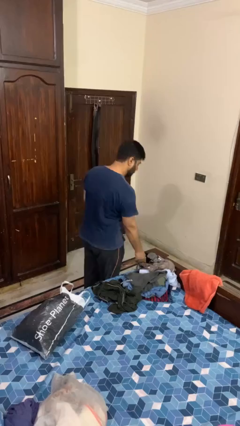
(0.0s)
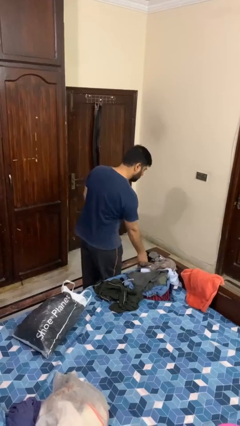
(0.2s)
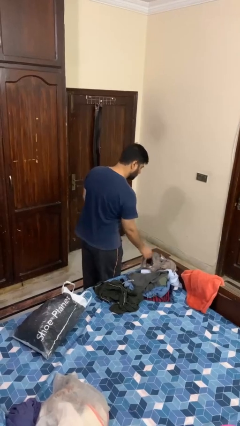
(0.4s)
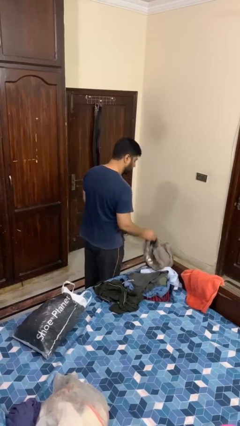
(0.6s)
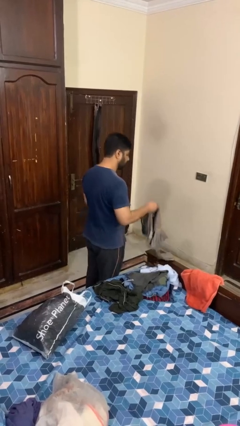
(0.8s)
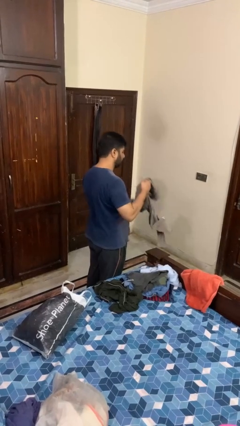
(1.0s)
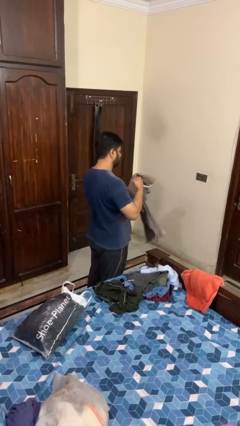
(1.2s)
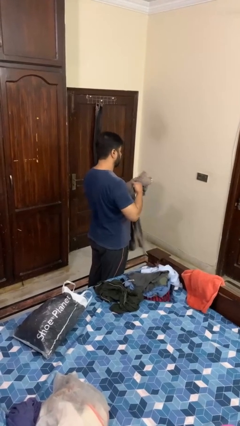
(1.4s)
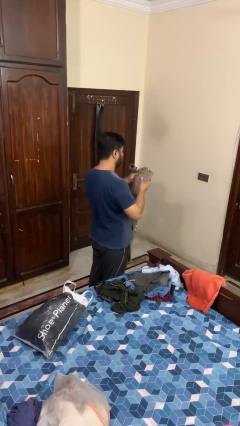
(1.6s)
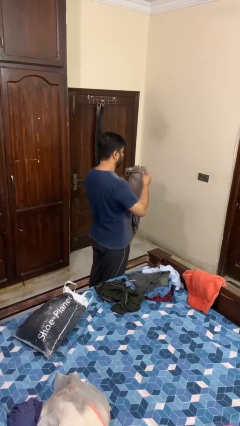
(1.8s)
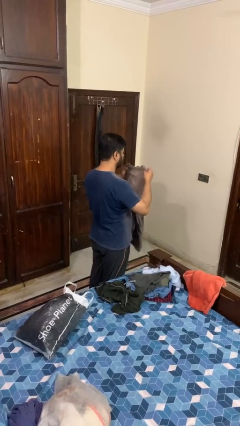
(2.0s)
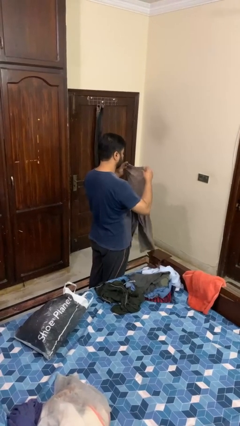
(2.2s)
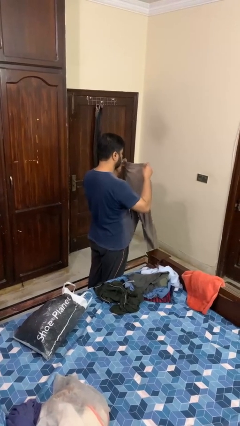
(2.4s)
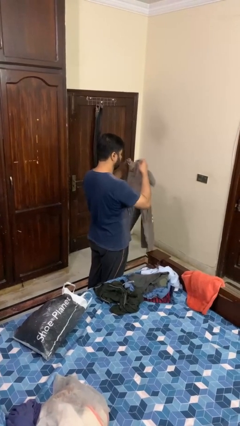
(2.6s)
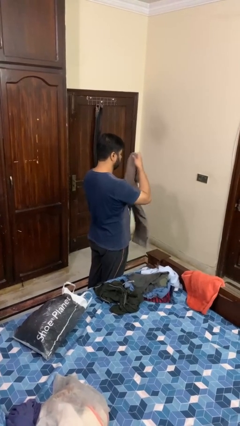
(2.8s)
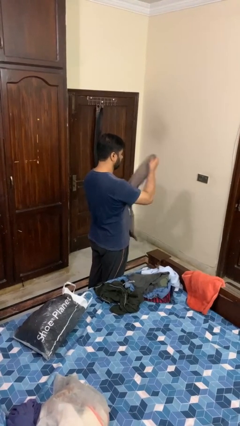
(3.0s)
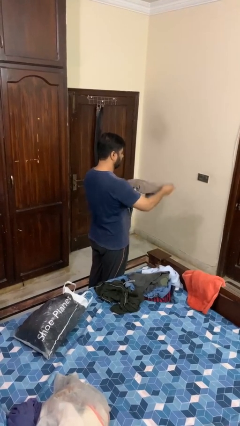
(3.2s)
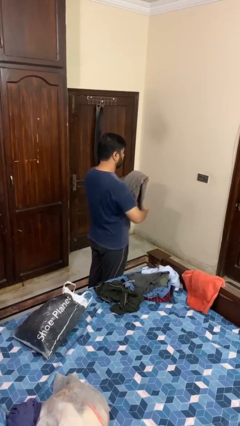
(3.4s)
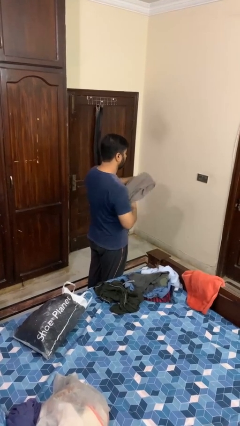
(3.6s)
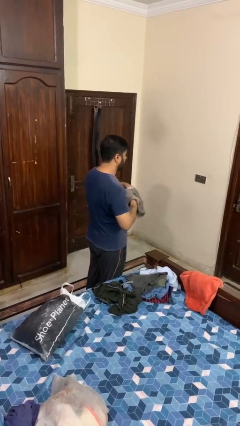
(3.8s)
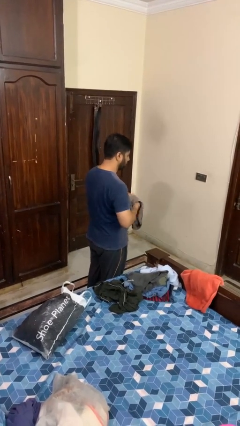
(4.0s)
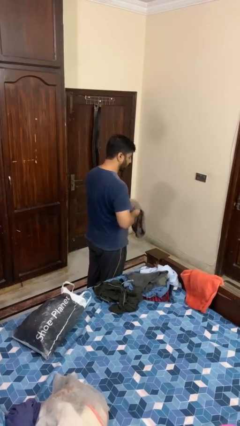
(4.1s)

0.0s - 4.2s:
person folds pants

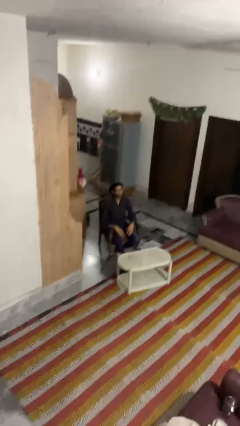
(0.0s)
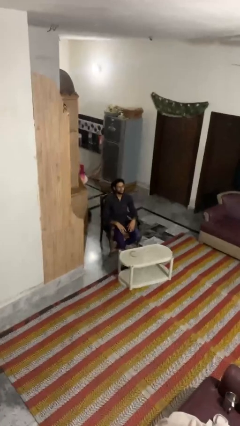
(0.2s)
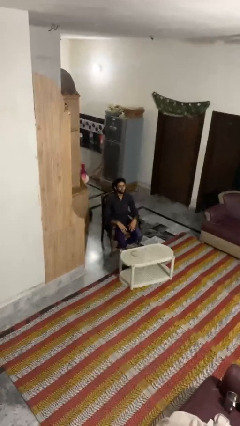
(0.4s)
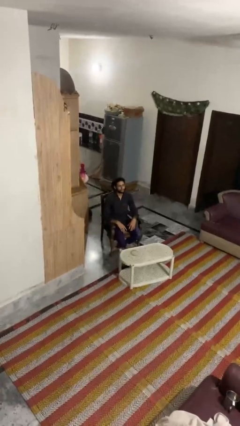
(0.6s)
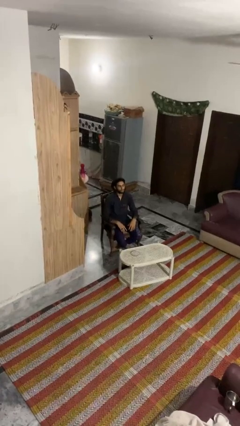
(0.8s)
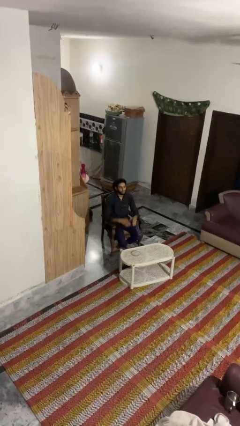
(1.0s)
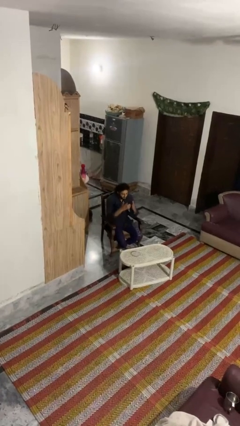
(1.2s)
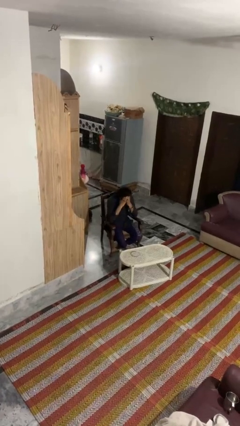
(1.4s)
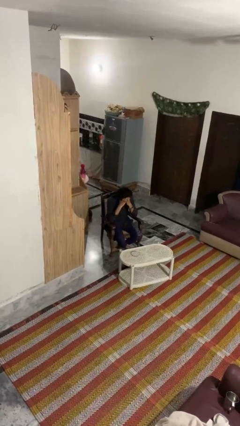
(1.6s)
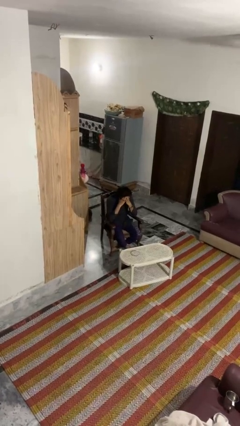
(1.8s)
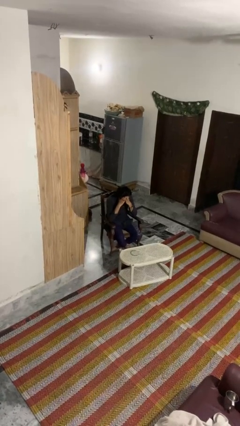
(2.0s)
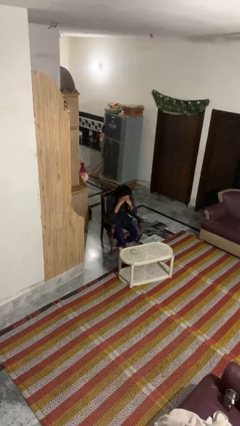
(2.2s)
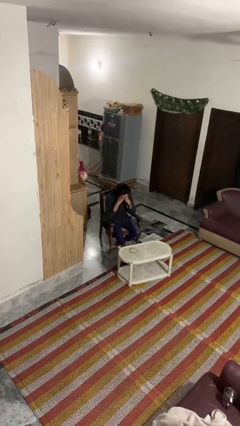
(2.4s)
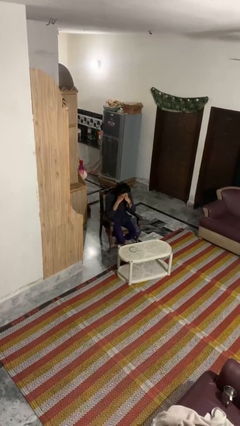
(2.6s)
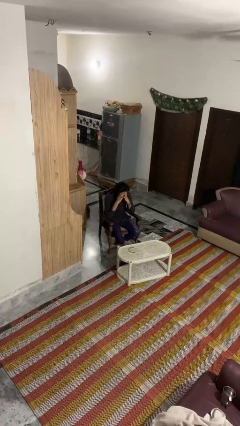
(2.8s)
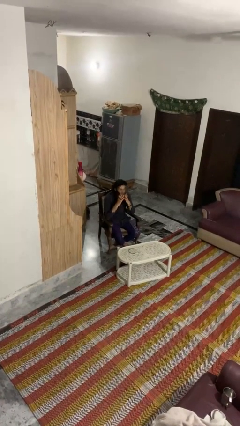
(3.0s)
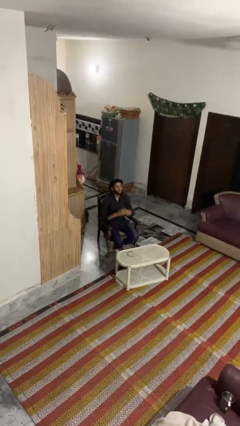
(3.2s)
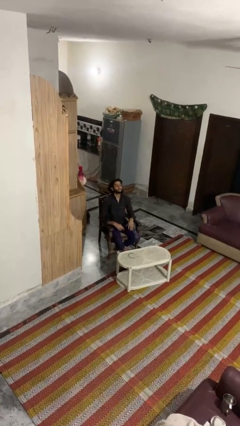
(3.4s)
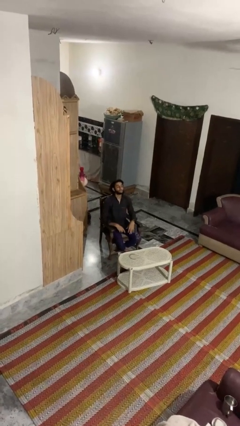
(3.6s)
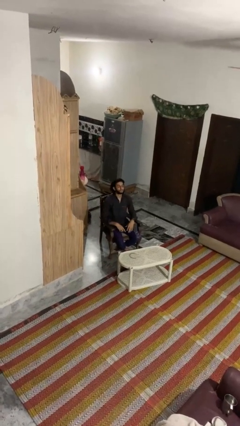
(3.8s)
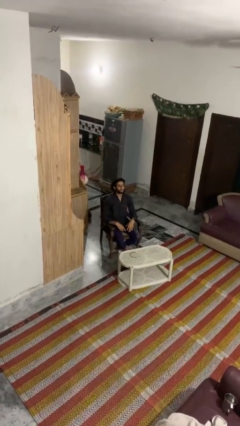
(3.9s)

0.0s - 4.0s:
person covers face with hands

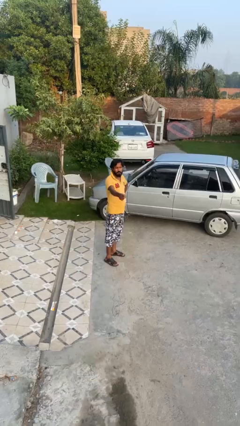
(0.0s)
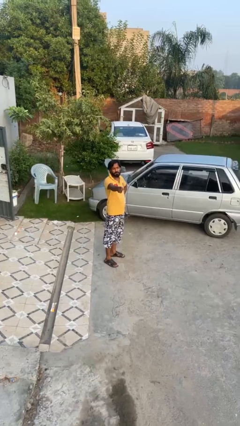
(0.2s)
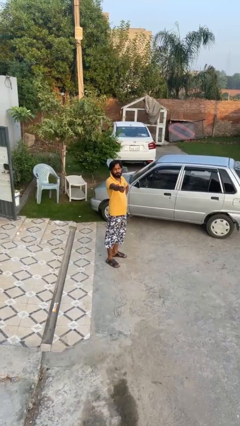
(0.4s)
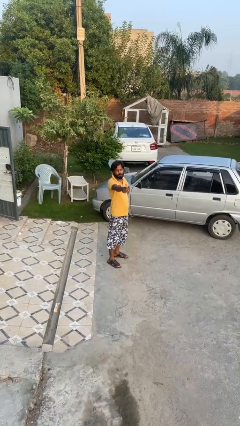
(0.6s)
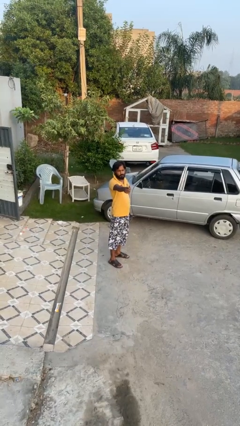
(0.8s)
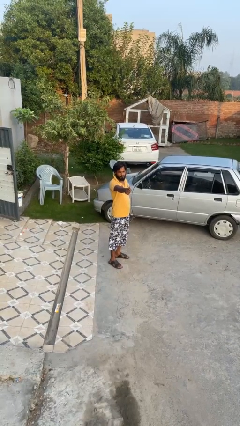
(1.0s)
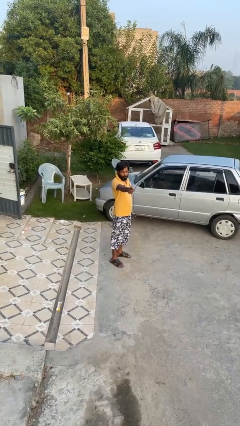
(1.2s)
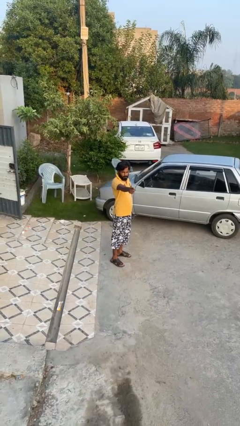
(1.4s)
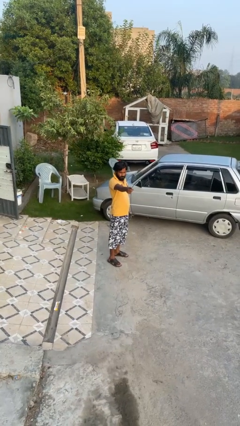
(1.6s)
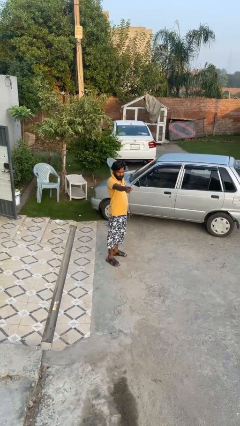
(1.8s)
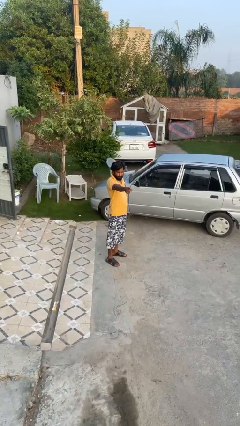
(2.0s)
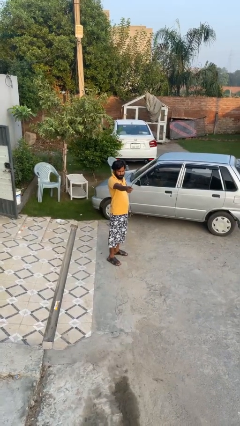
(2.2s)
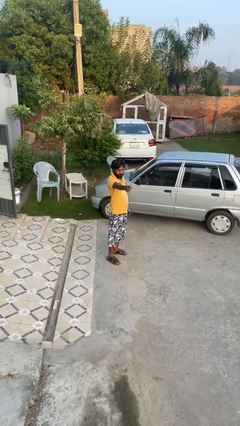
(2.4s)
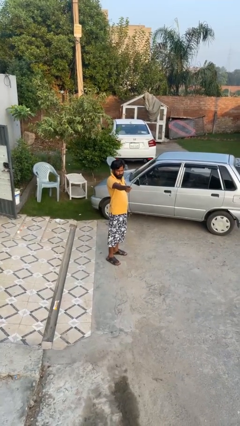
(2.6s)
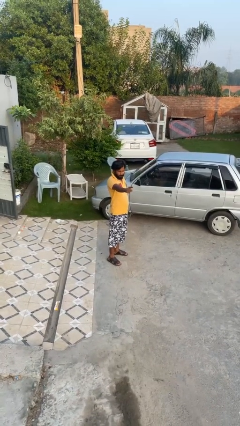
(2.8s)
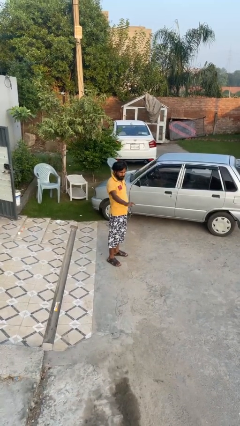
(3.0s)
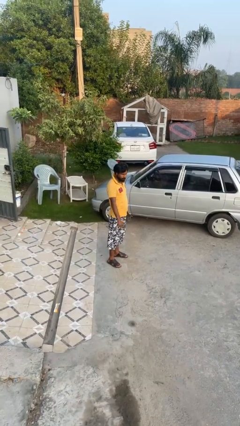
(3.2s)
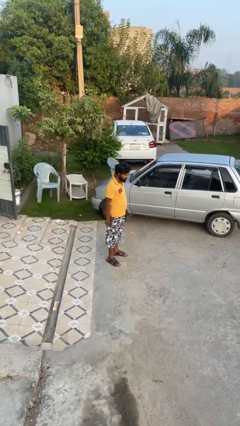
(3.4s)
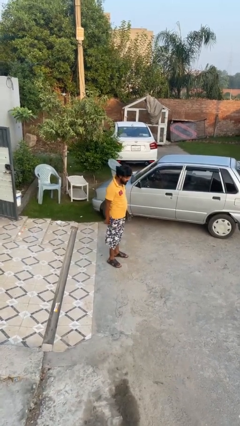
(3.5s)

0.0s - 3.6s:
person points at person

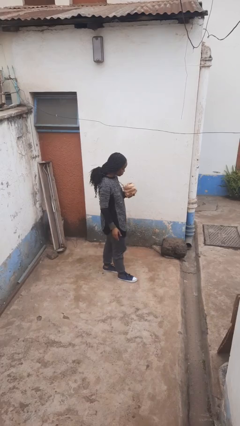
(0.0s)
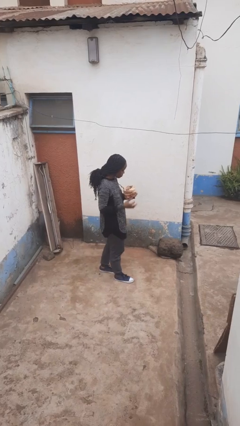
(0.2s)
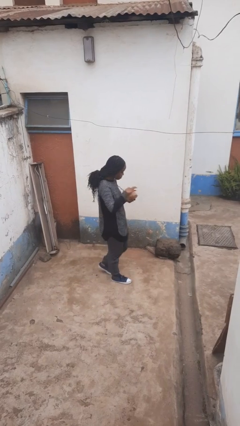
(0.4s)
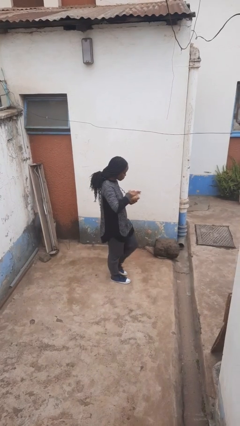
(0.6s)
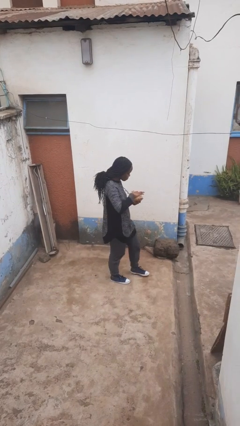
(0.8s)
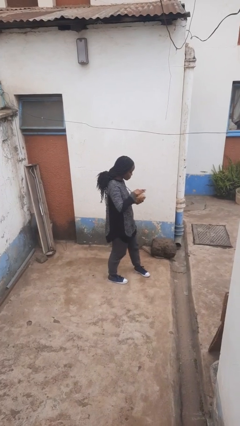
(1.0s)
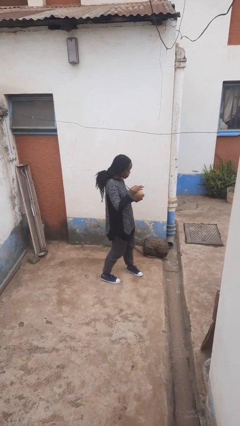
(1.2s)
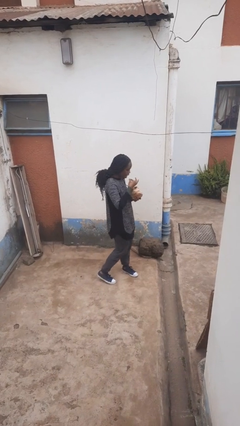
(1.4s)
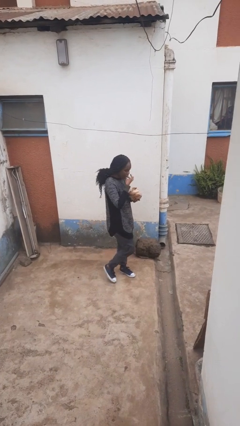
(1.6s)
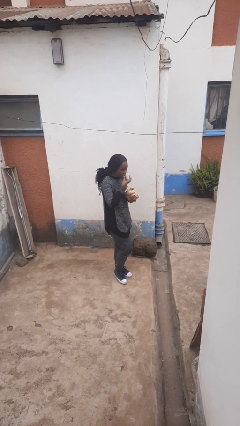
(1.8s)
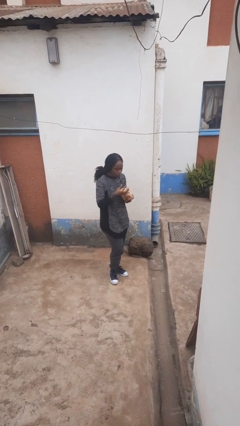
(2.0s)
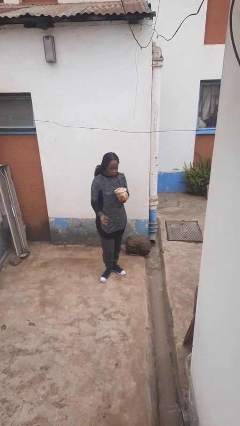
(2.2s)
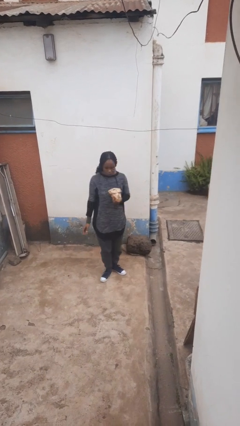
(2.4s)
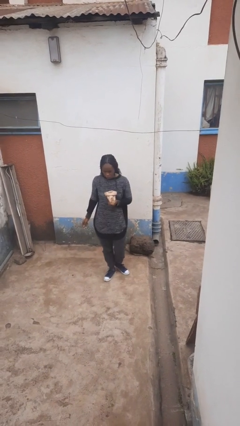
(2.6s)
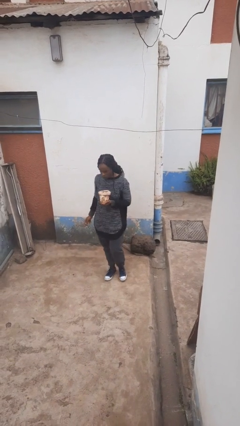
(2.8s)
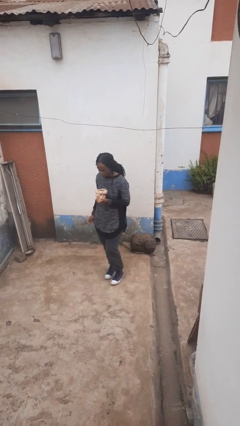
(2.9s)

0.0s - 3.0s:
person eats snack from bag

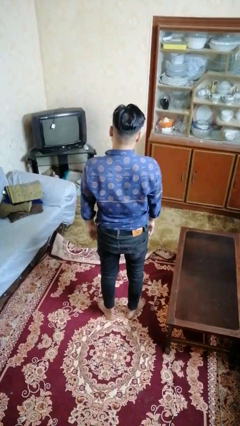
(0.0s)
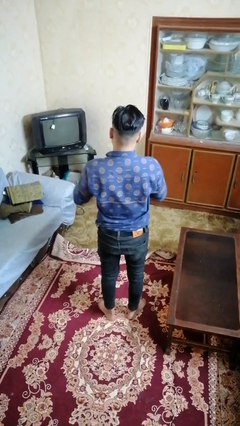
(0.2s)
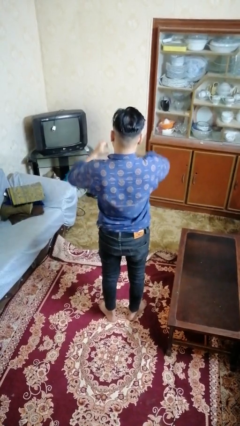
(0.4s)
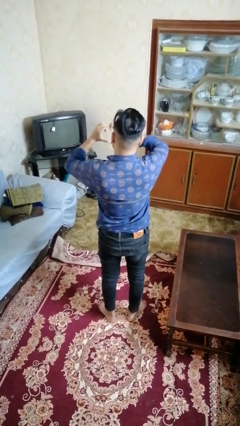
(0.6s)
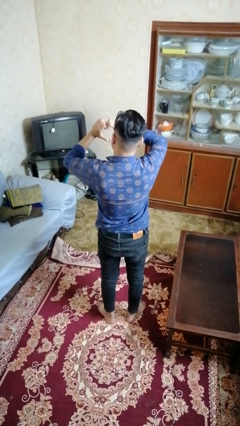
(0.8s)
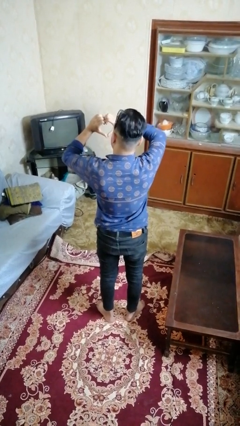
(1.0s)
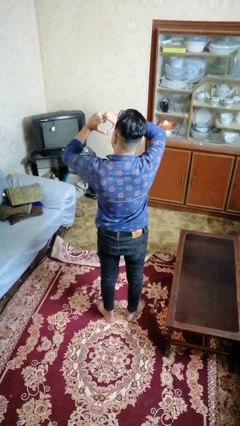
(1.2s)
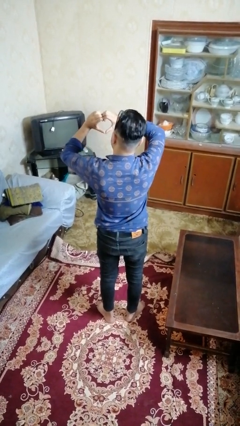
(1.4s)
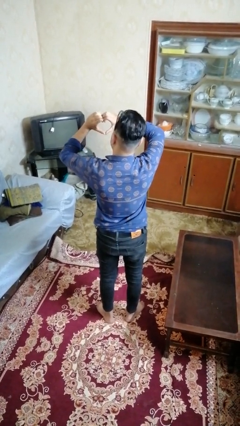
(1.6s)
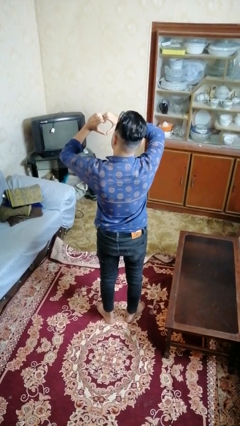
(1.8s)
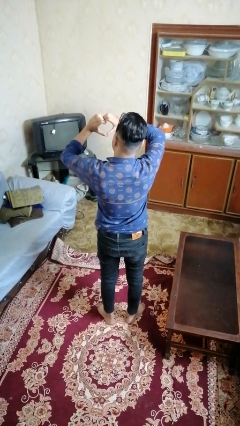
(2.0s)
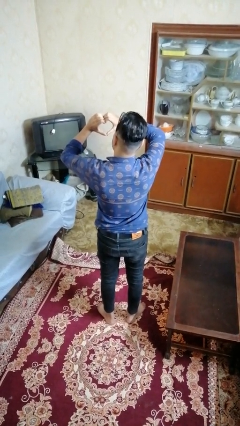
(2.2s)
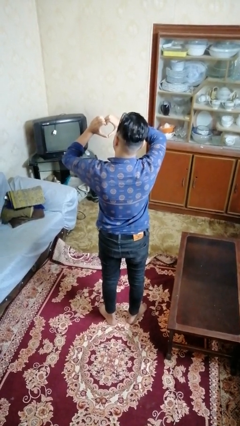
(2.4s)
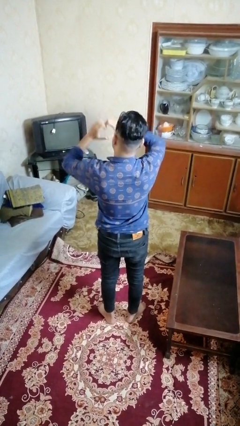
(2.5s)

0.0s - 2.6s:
person gestures heart

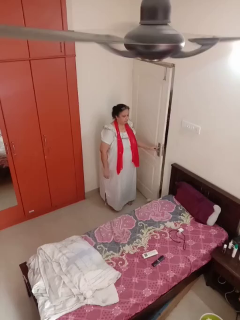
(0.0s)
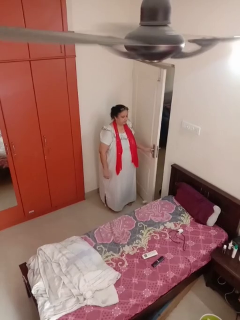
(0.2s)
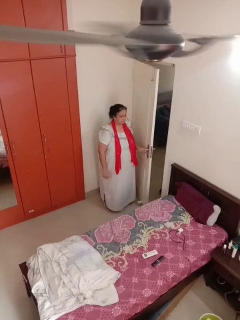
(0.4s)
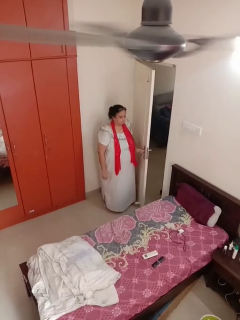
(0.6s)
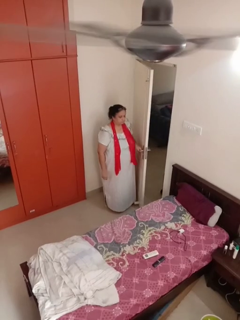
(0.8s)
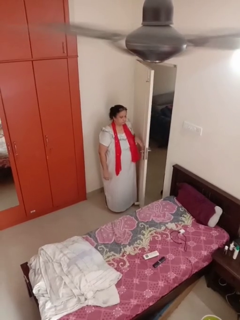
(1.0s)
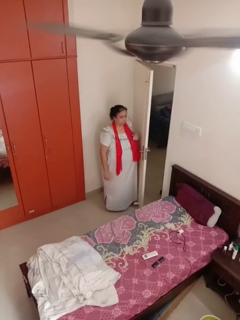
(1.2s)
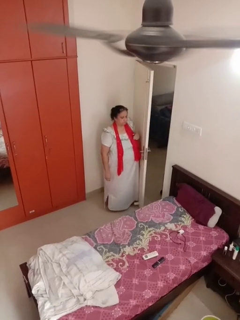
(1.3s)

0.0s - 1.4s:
person opens facility door
